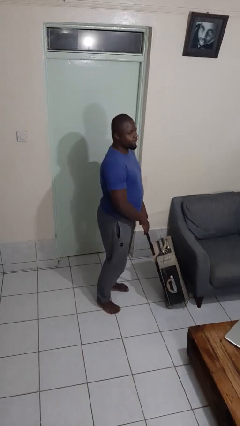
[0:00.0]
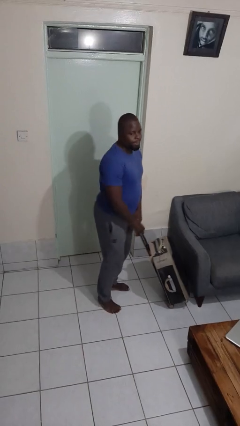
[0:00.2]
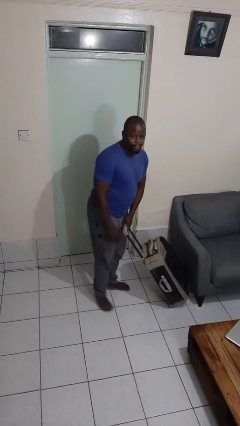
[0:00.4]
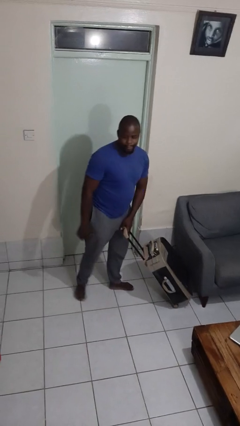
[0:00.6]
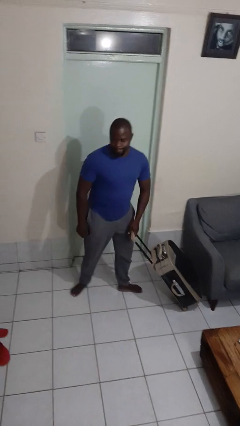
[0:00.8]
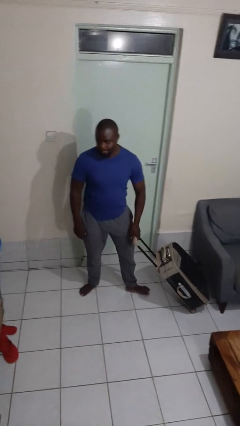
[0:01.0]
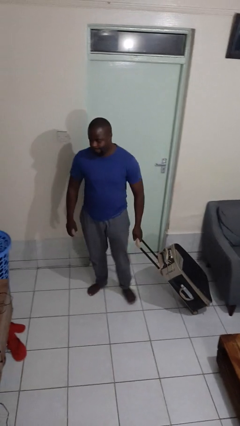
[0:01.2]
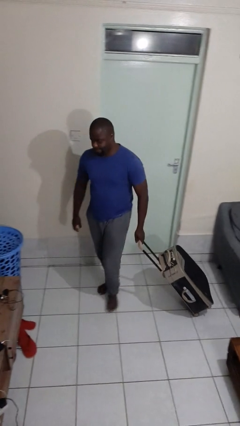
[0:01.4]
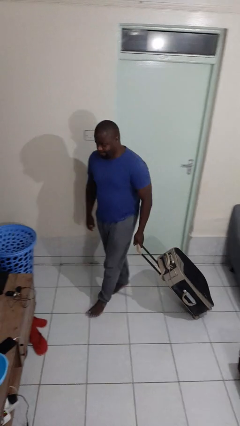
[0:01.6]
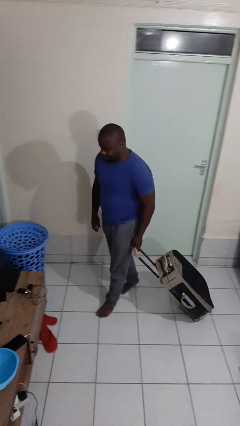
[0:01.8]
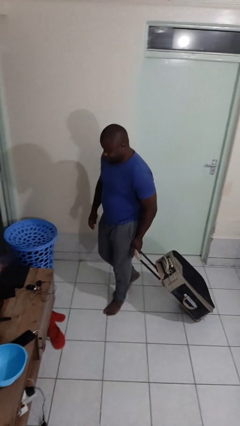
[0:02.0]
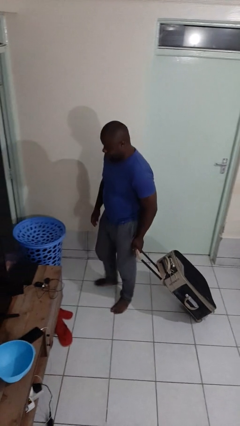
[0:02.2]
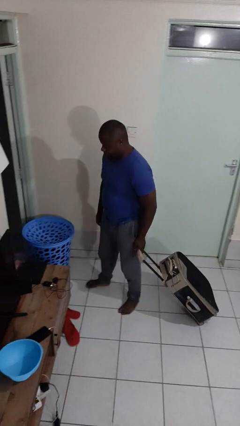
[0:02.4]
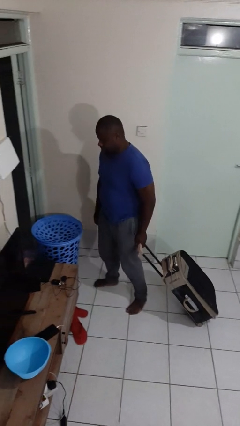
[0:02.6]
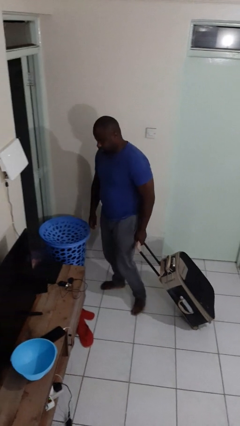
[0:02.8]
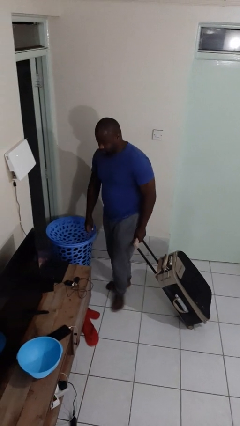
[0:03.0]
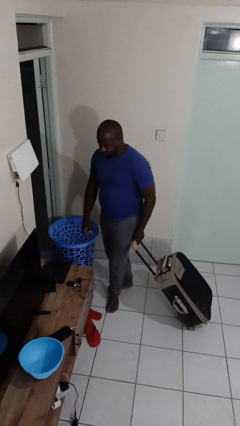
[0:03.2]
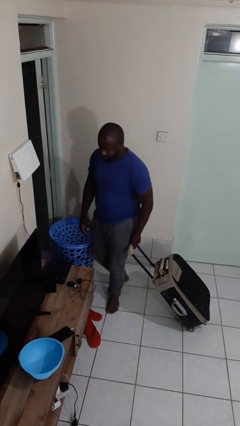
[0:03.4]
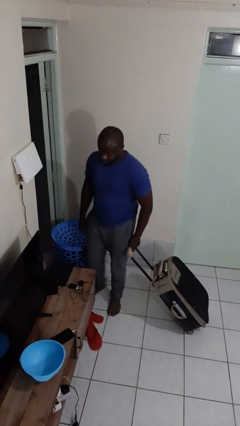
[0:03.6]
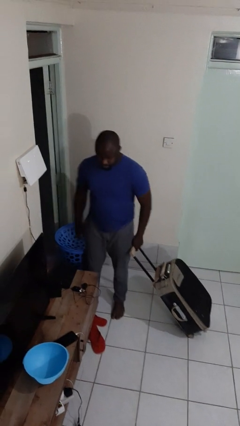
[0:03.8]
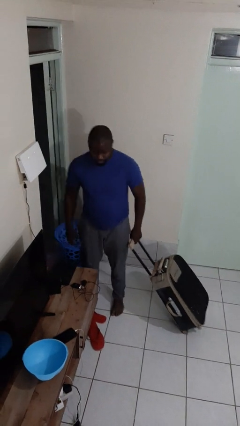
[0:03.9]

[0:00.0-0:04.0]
person pulls wheeled cart

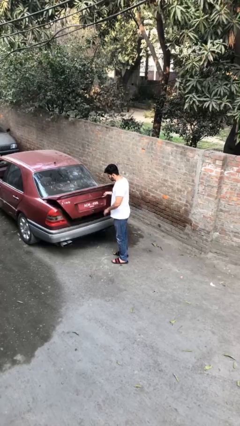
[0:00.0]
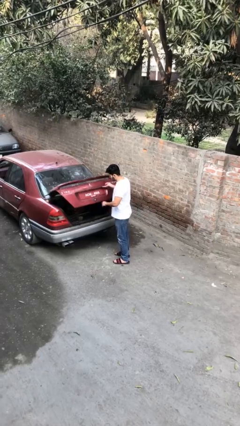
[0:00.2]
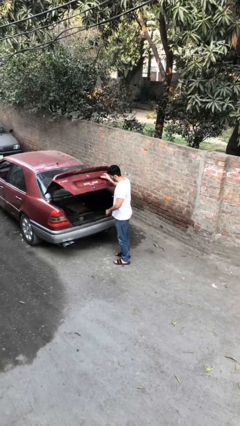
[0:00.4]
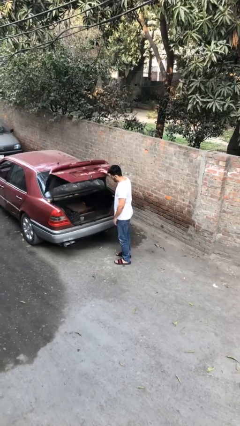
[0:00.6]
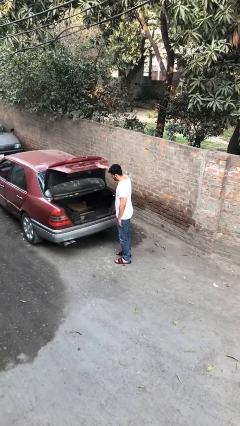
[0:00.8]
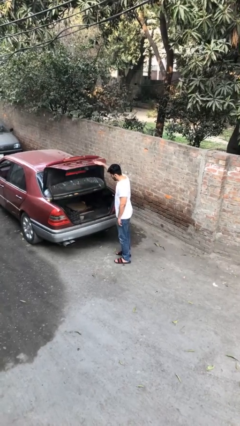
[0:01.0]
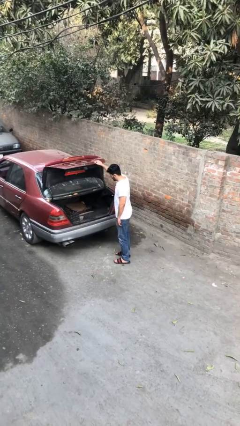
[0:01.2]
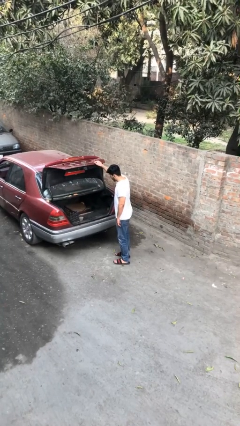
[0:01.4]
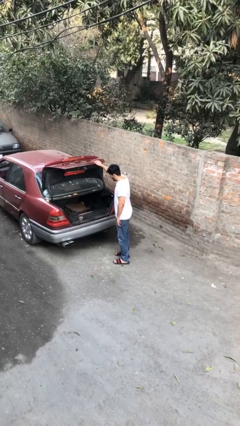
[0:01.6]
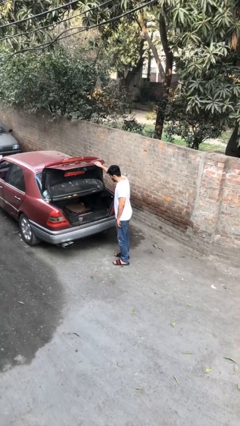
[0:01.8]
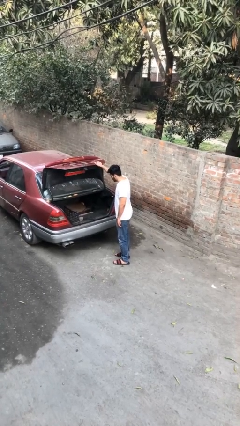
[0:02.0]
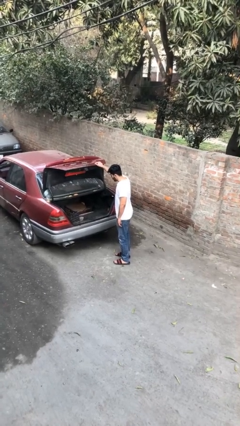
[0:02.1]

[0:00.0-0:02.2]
person opens car trunk

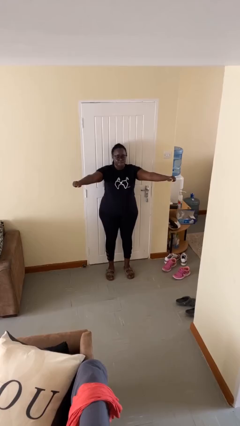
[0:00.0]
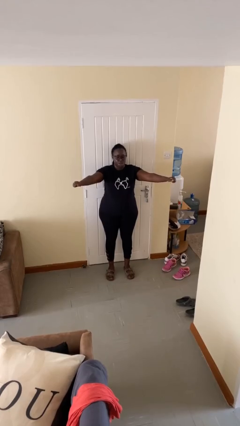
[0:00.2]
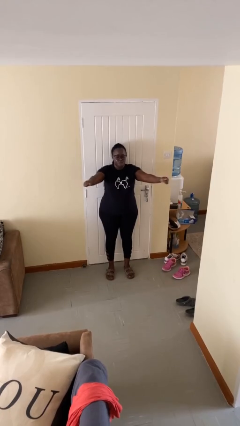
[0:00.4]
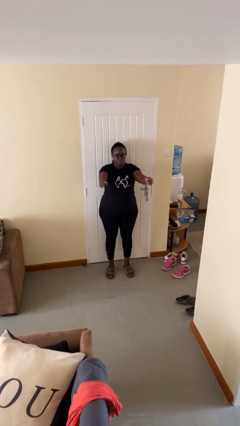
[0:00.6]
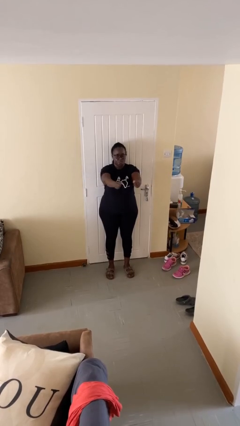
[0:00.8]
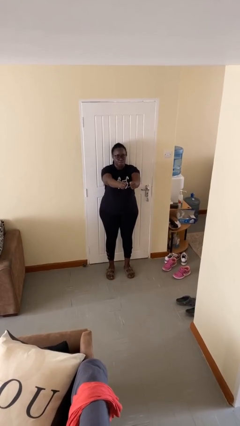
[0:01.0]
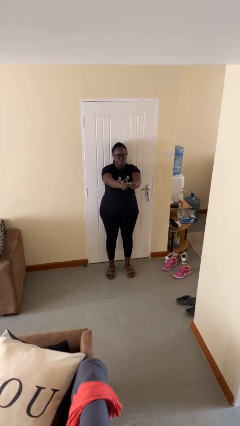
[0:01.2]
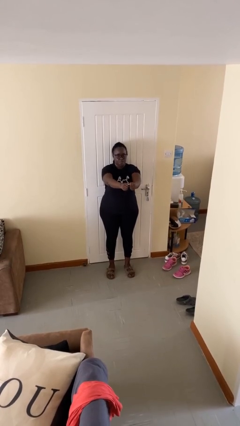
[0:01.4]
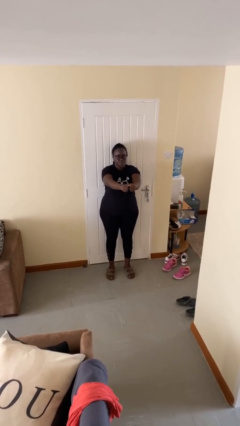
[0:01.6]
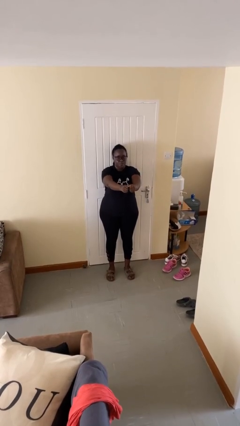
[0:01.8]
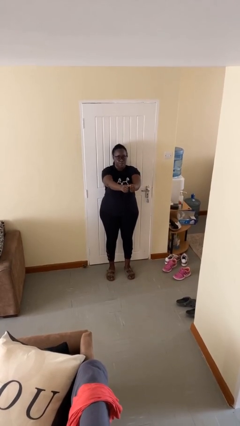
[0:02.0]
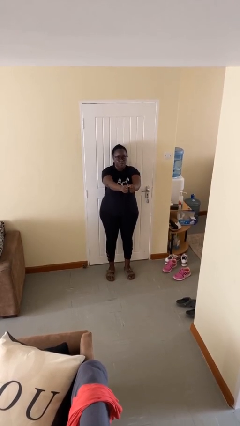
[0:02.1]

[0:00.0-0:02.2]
person gestures zoom out

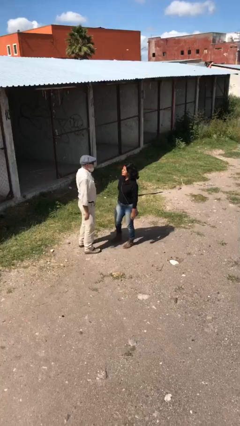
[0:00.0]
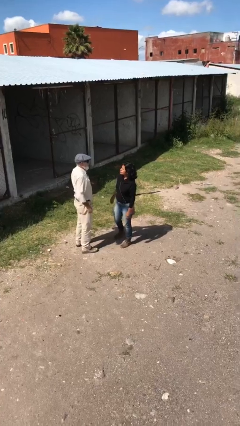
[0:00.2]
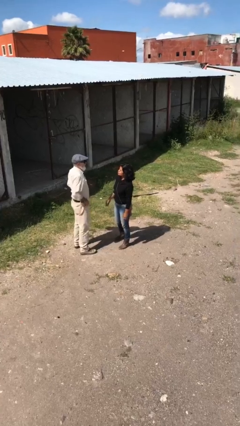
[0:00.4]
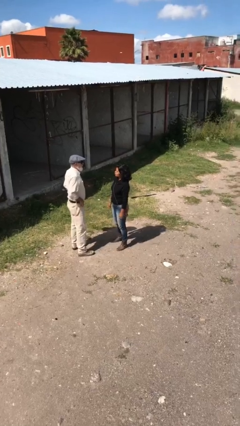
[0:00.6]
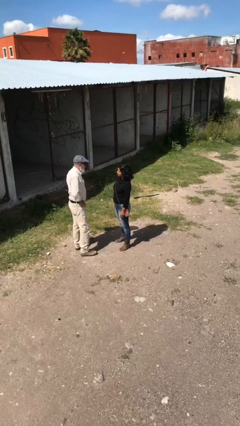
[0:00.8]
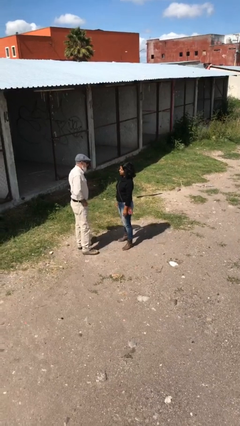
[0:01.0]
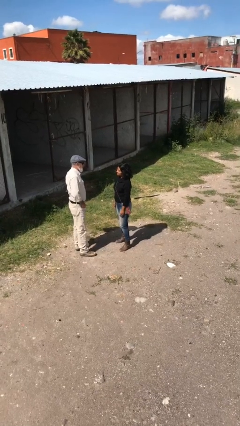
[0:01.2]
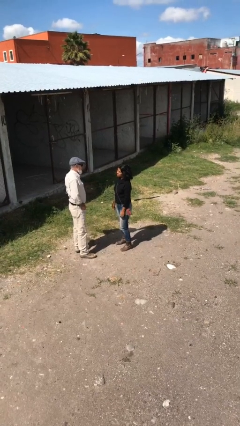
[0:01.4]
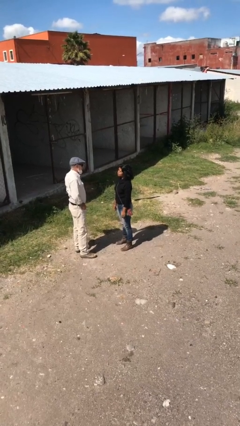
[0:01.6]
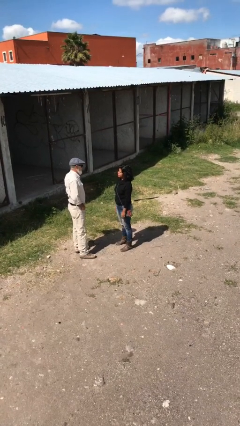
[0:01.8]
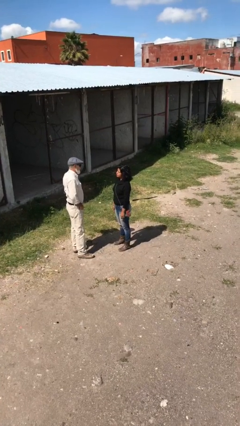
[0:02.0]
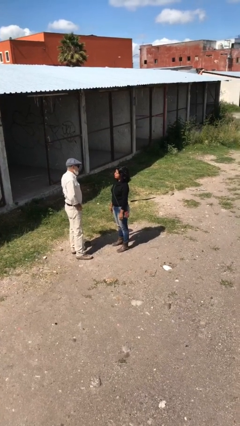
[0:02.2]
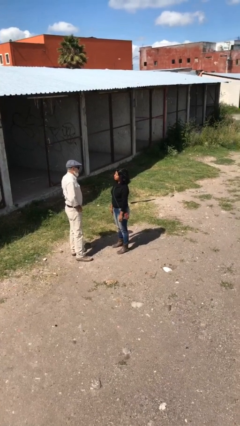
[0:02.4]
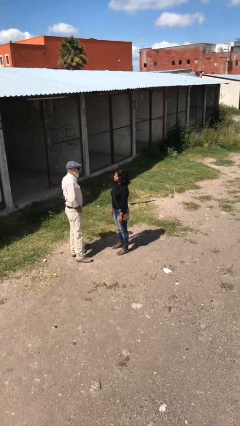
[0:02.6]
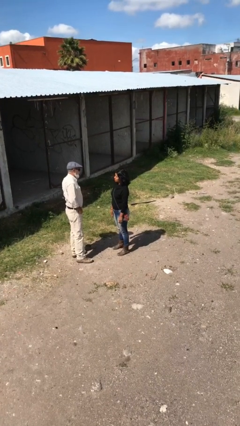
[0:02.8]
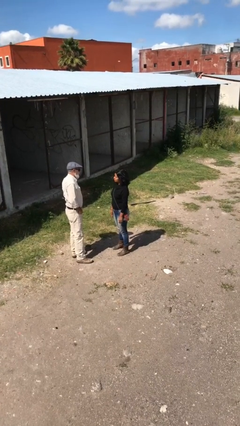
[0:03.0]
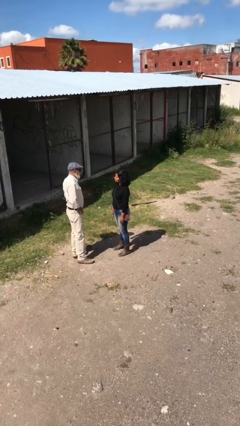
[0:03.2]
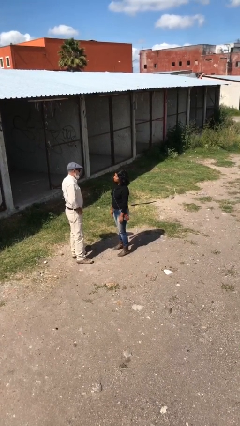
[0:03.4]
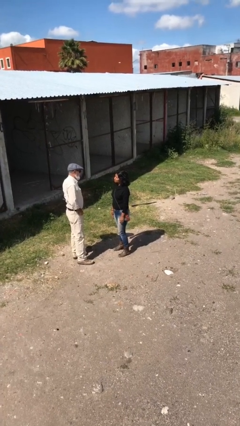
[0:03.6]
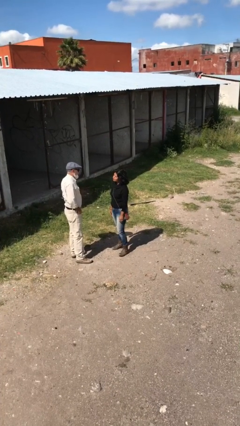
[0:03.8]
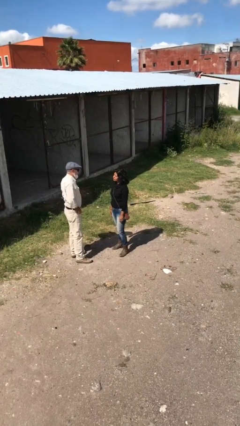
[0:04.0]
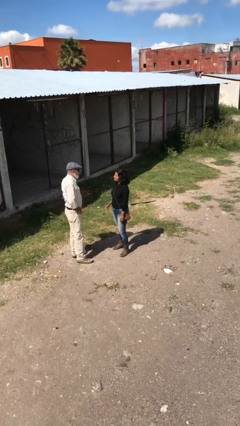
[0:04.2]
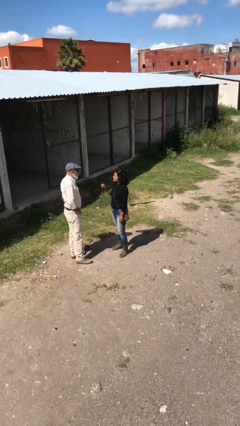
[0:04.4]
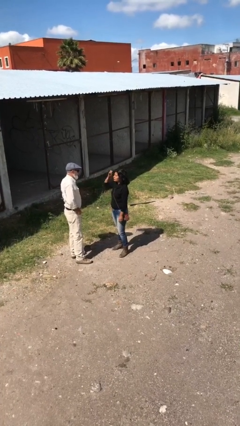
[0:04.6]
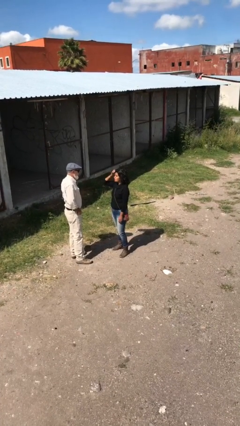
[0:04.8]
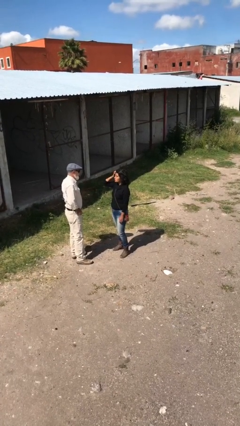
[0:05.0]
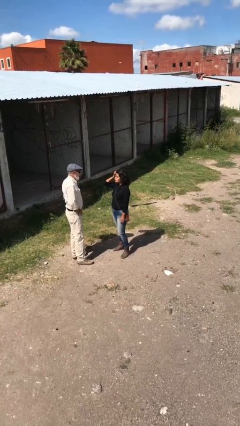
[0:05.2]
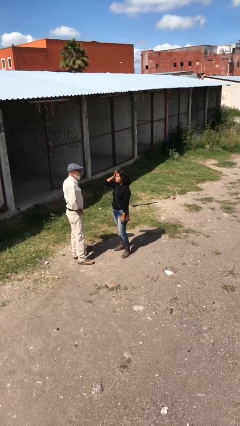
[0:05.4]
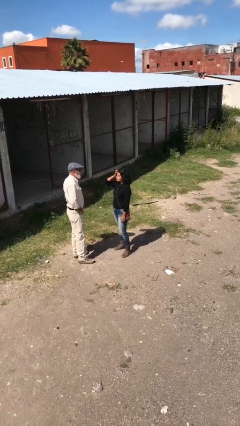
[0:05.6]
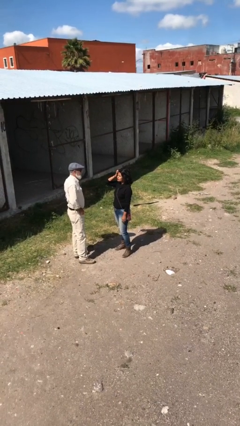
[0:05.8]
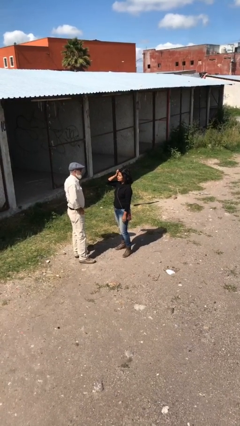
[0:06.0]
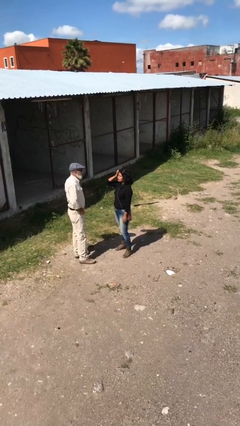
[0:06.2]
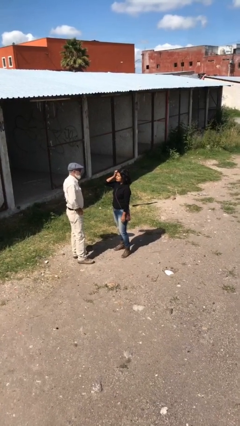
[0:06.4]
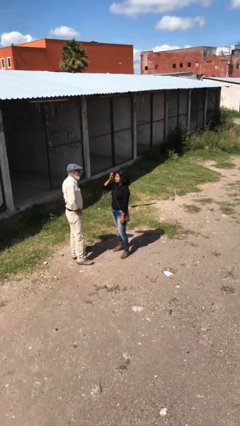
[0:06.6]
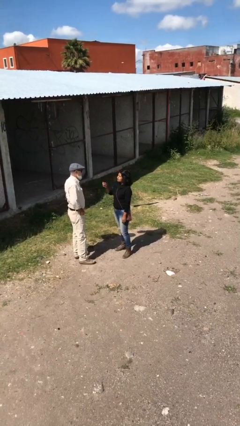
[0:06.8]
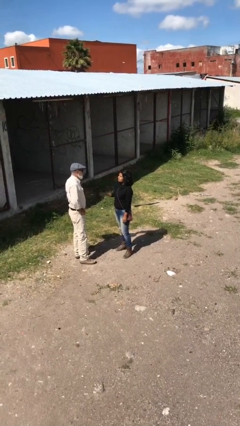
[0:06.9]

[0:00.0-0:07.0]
person talks to person

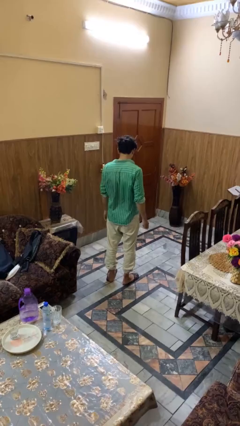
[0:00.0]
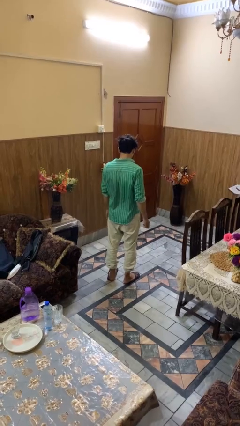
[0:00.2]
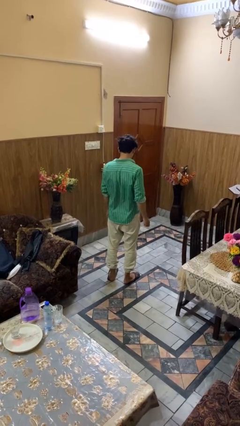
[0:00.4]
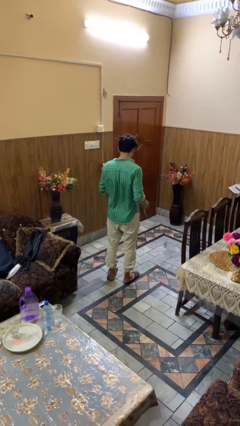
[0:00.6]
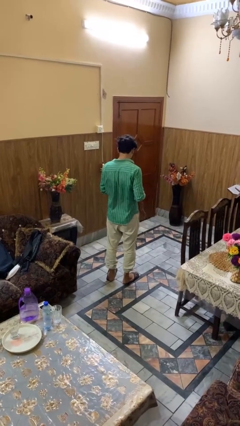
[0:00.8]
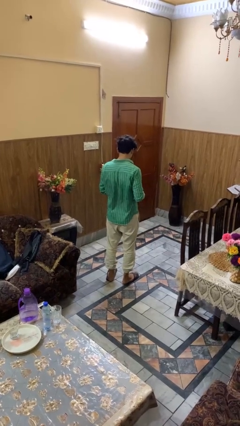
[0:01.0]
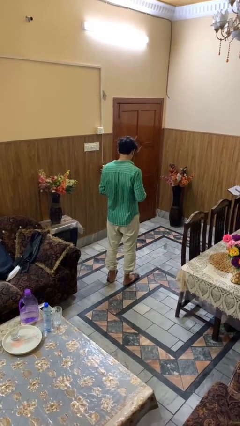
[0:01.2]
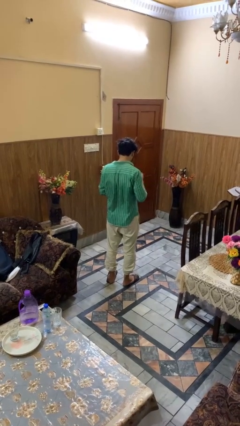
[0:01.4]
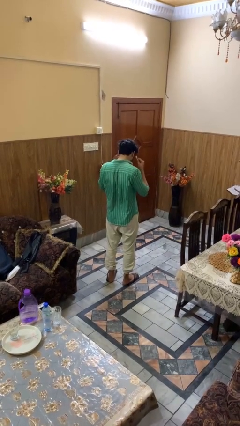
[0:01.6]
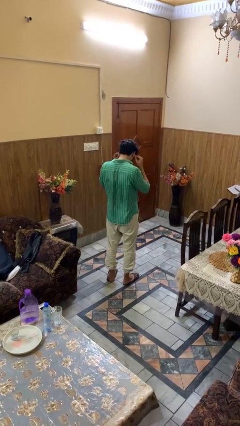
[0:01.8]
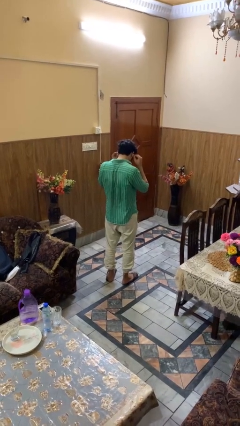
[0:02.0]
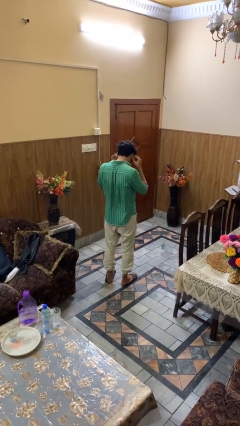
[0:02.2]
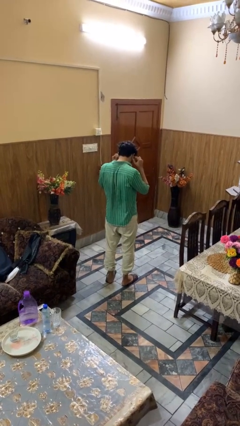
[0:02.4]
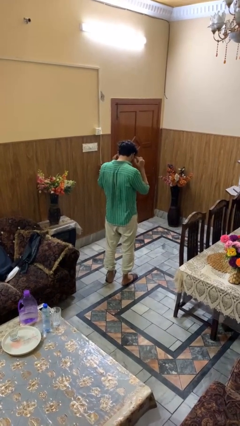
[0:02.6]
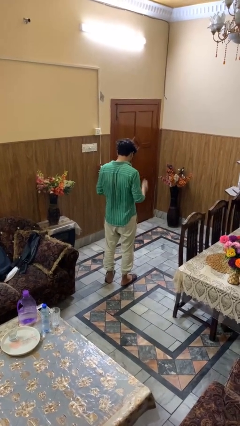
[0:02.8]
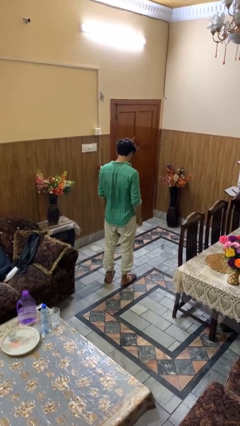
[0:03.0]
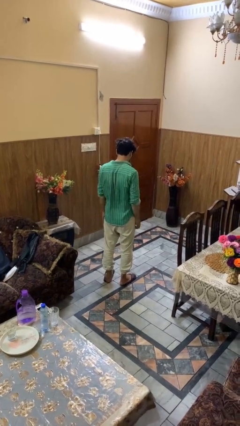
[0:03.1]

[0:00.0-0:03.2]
person puts on headphones
